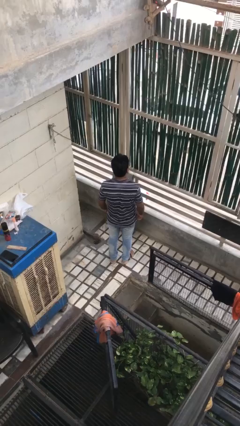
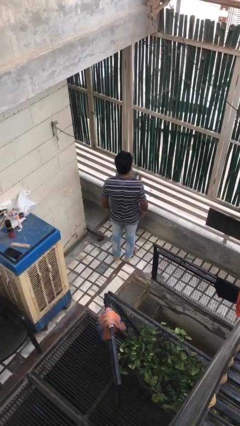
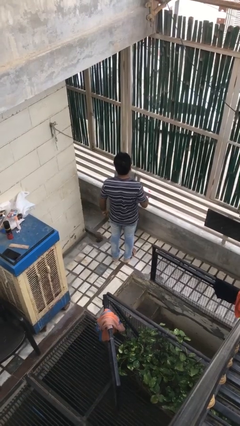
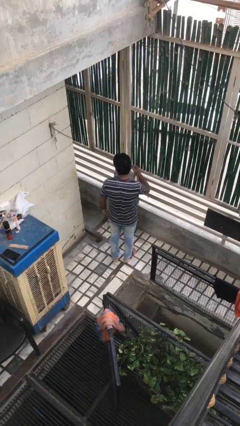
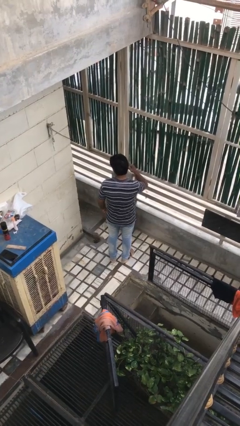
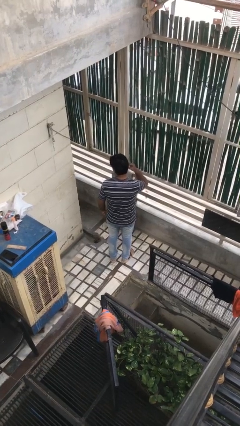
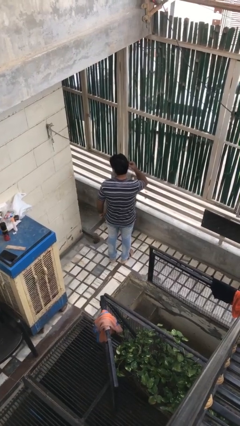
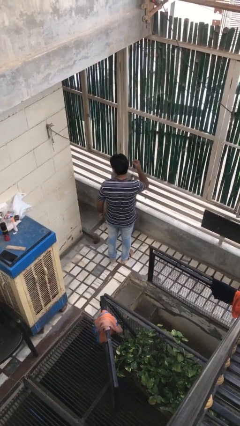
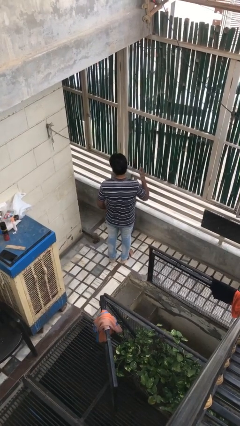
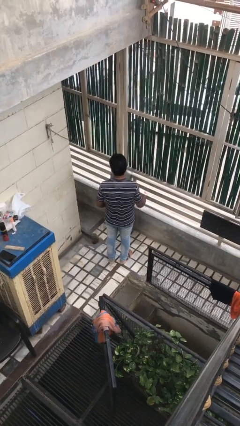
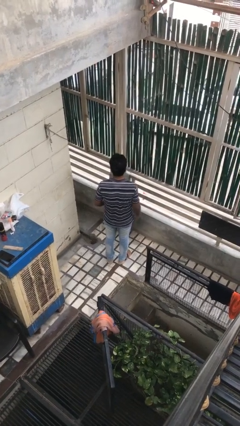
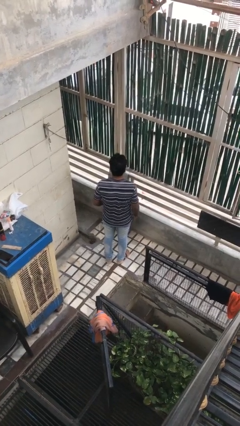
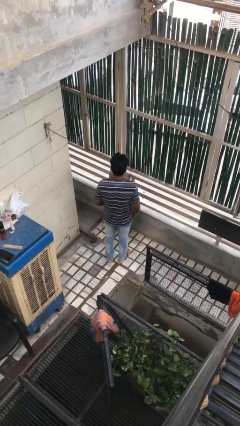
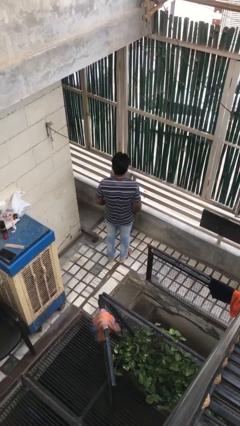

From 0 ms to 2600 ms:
person takes off earrings

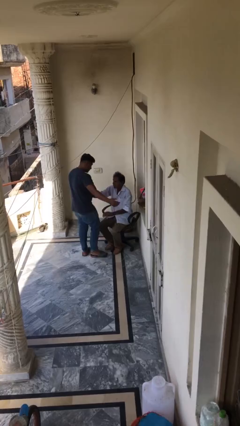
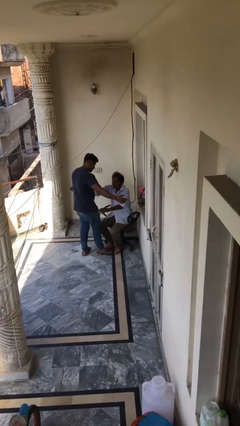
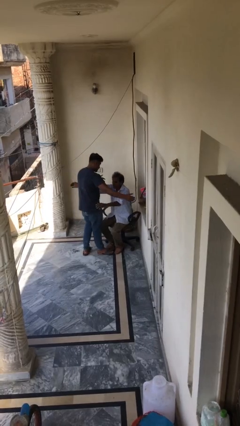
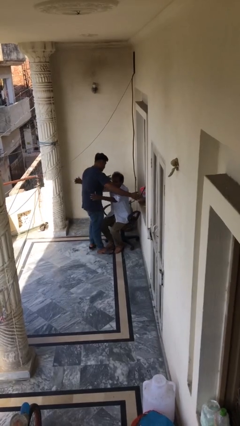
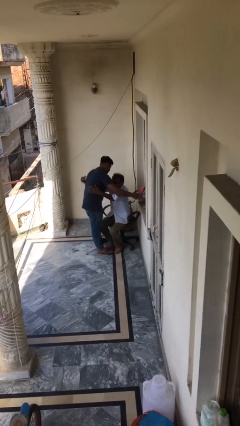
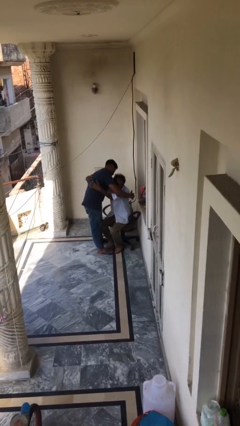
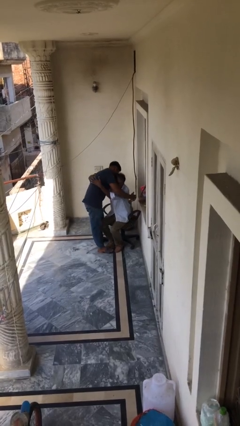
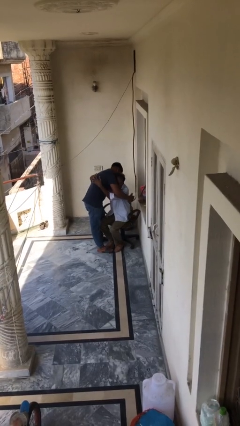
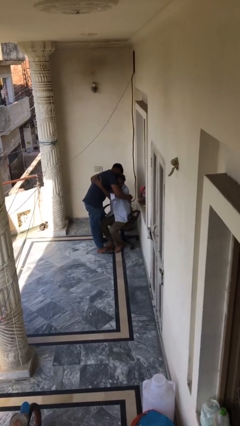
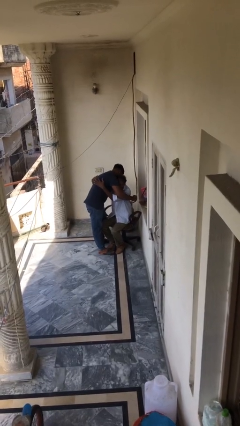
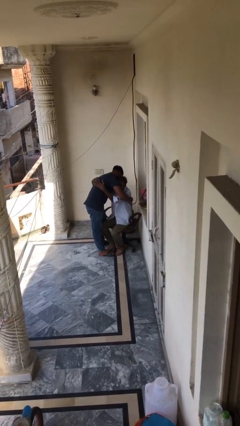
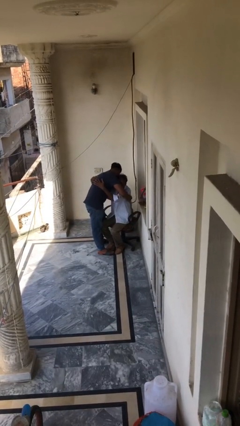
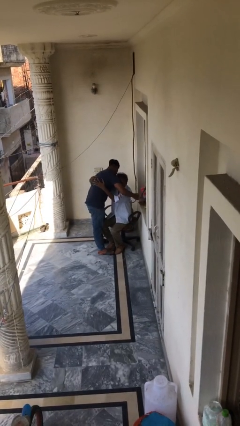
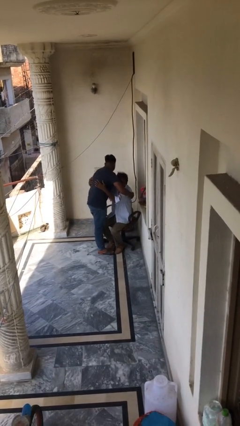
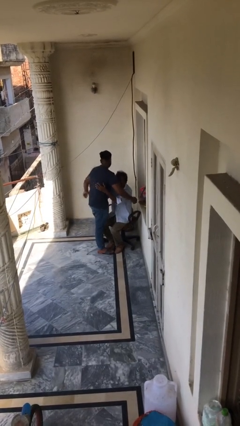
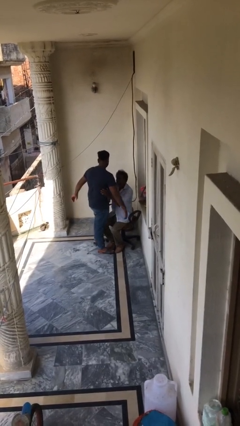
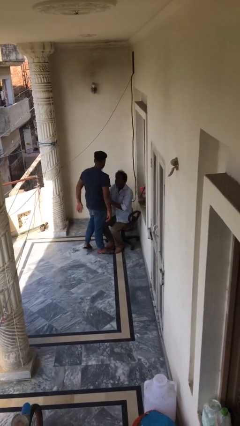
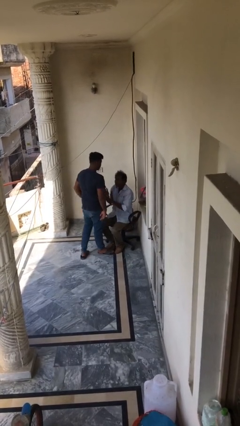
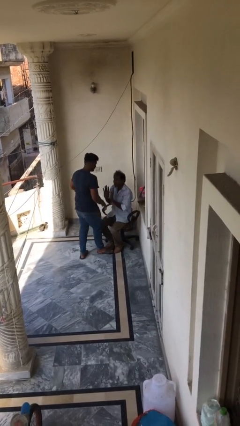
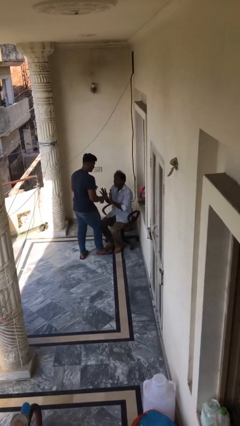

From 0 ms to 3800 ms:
person embraces person

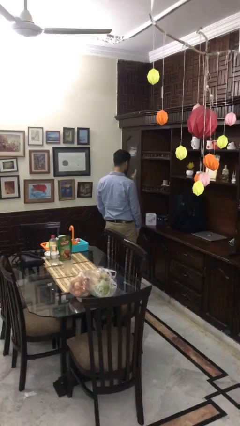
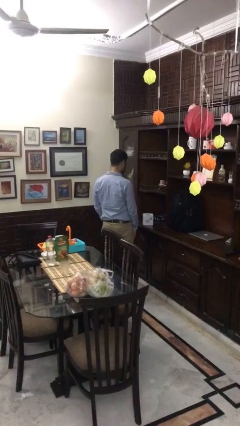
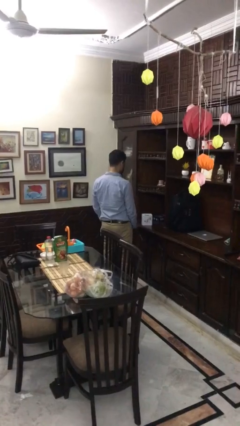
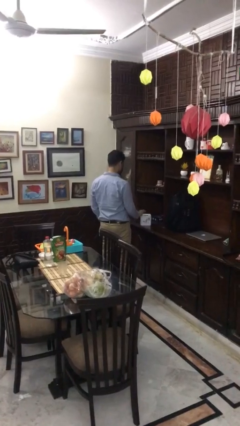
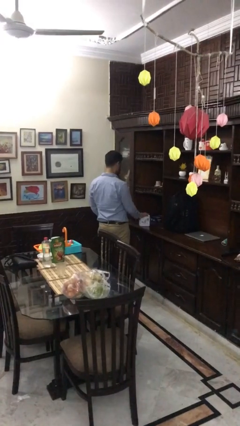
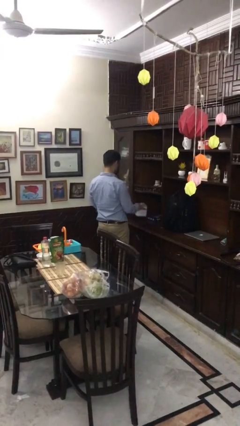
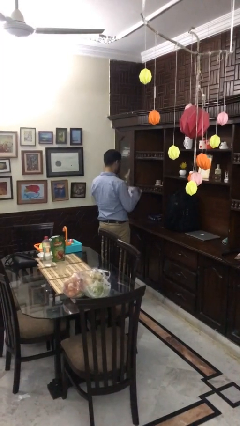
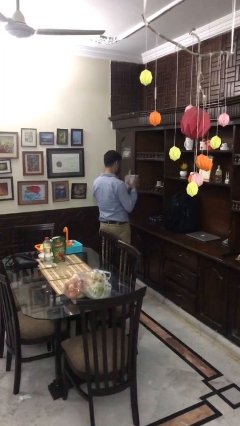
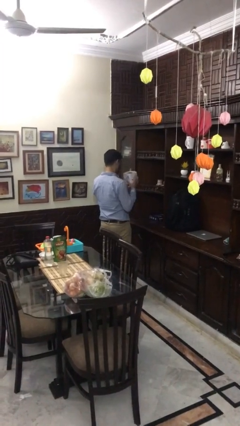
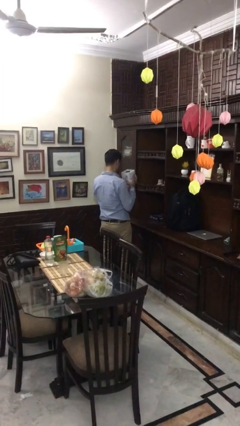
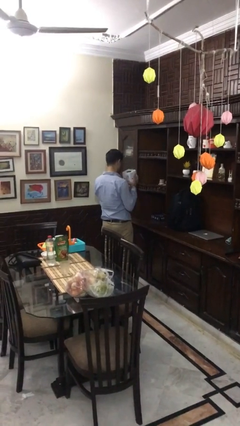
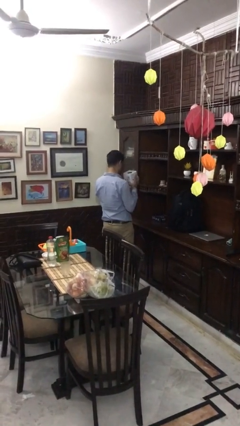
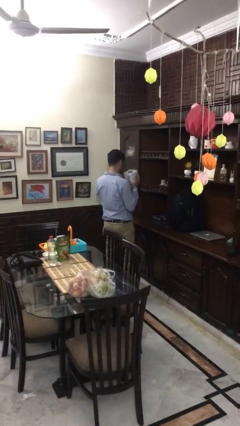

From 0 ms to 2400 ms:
person picks up object from countertop

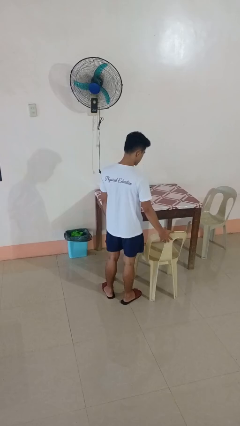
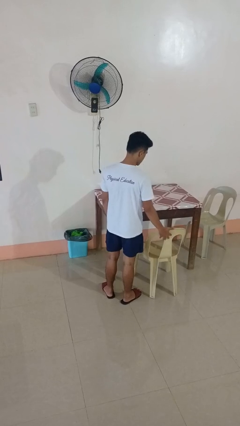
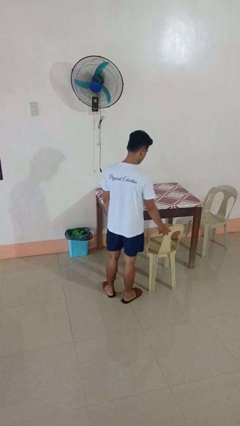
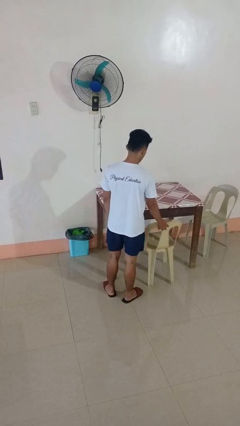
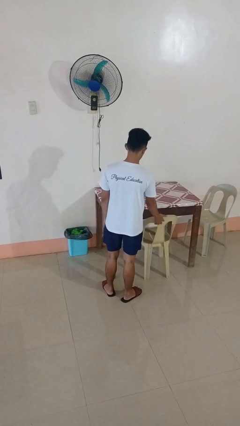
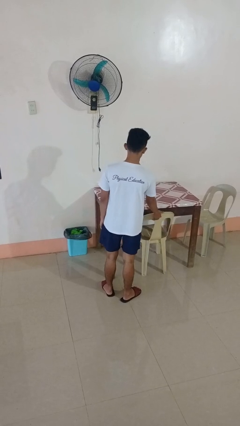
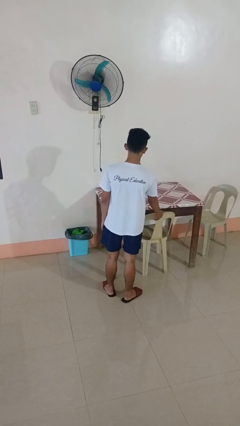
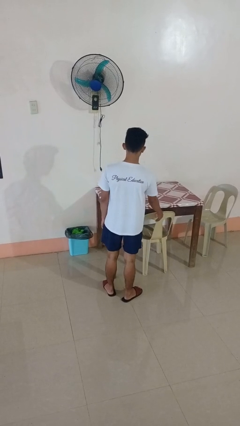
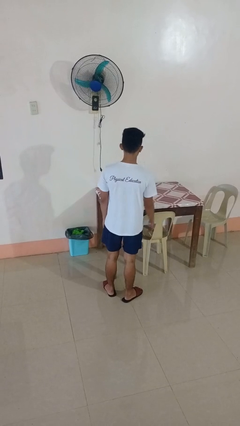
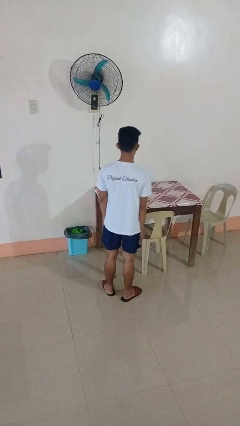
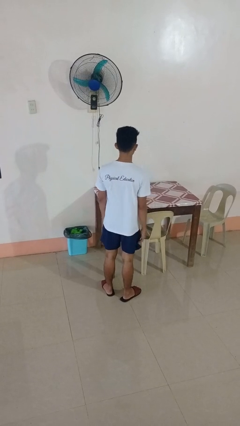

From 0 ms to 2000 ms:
person pushes in chair

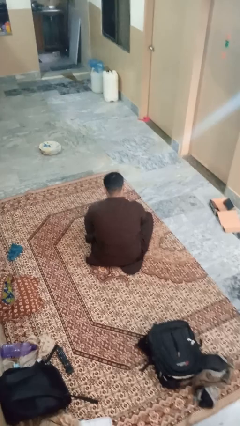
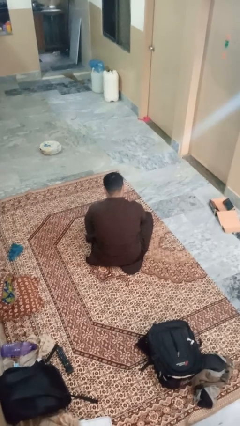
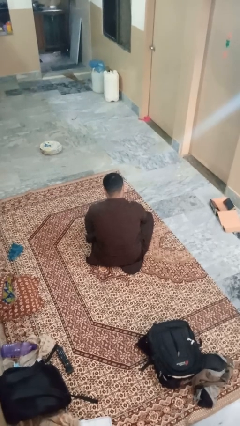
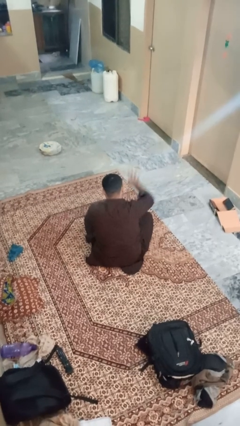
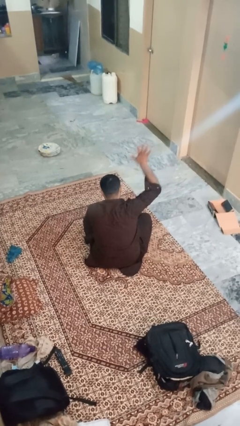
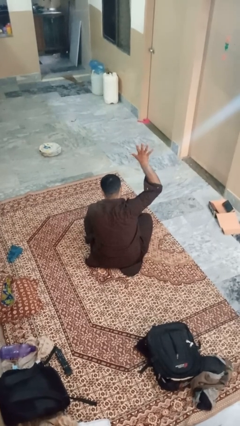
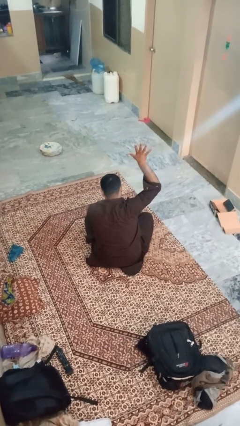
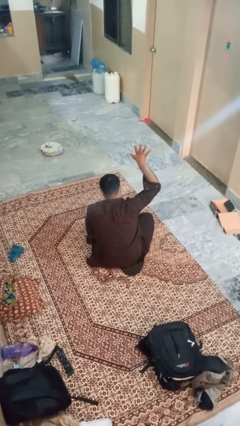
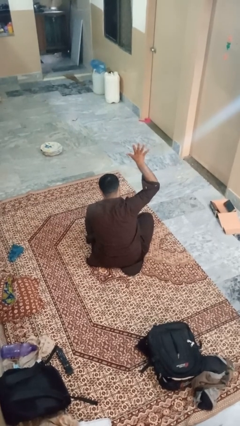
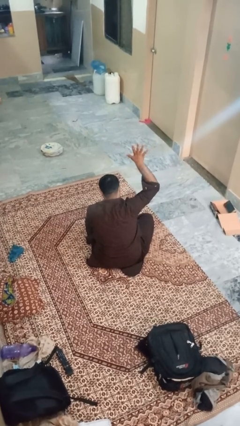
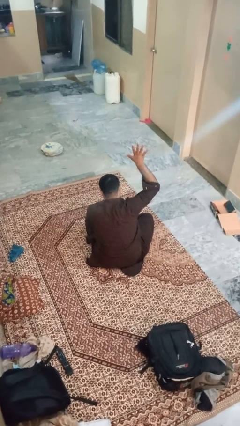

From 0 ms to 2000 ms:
person gestures number five

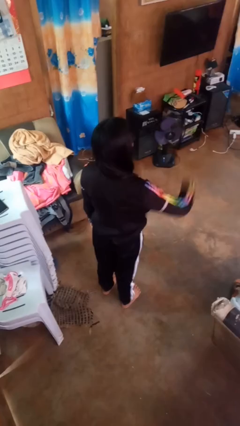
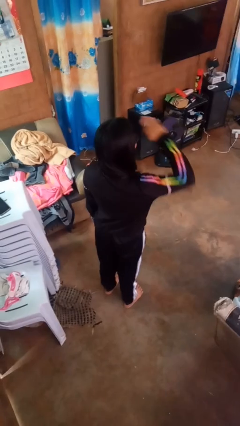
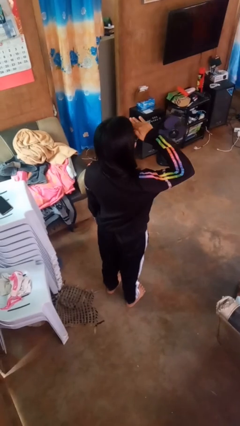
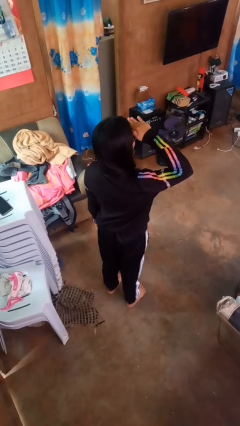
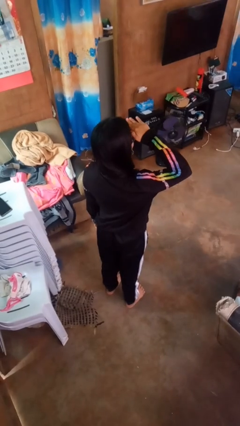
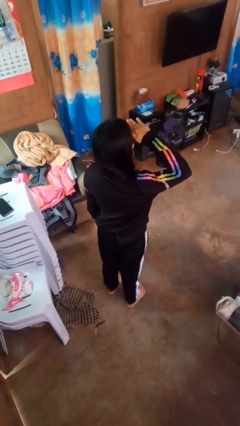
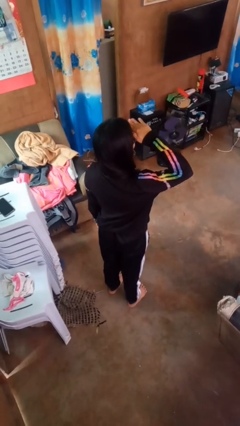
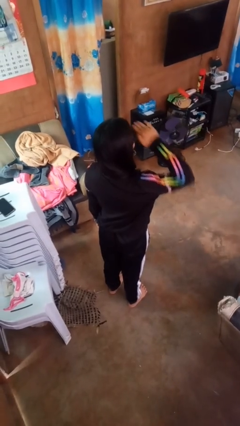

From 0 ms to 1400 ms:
person salutes

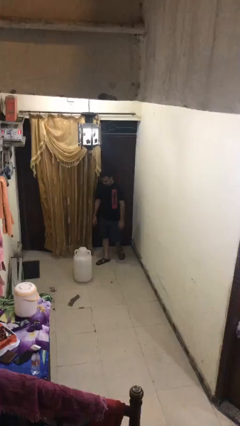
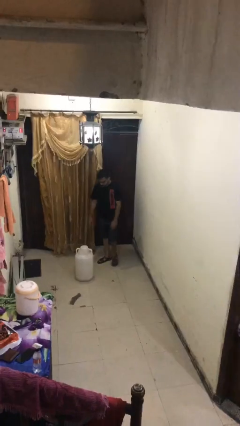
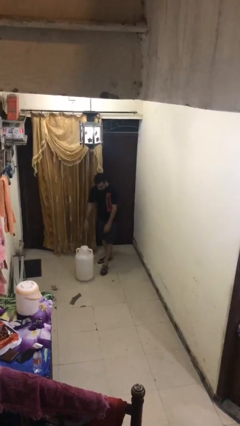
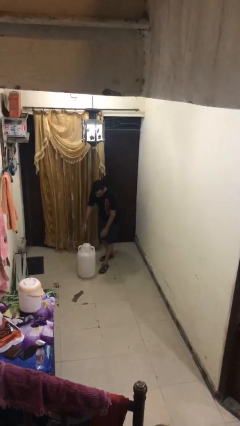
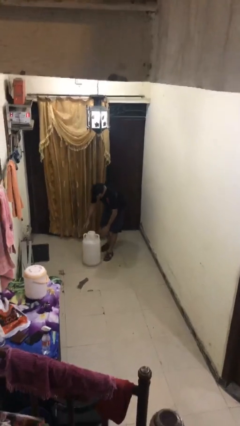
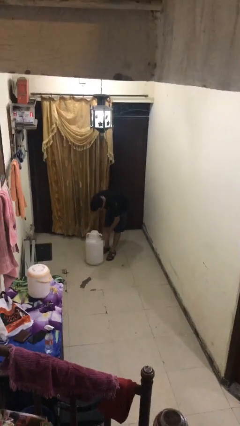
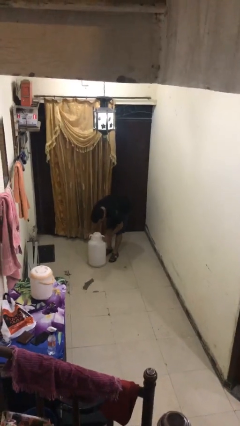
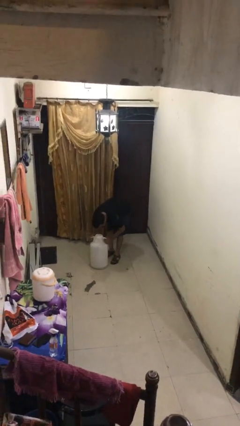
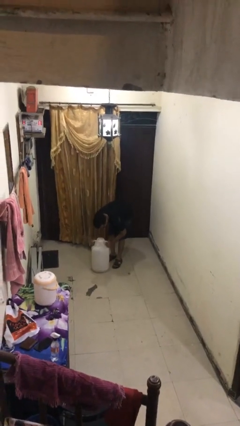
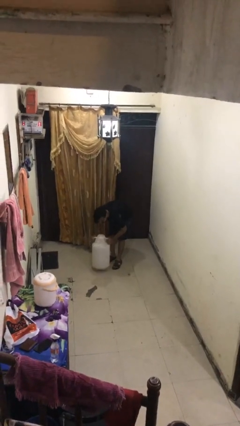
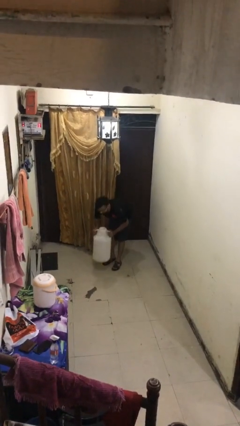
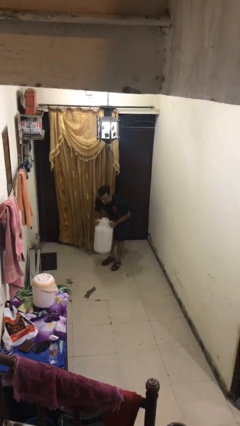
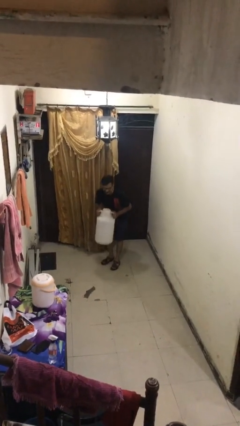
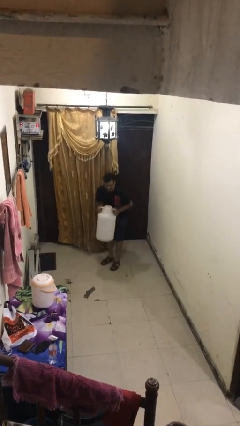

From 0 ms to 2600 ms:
person picks up object from floor

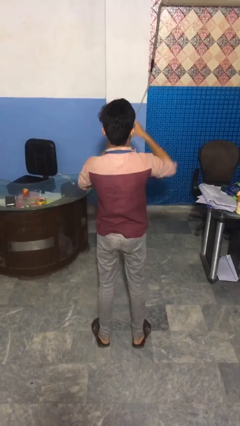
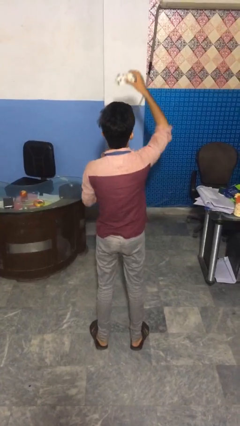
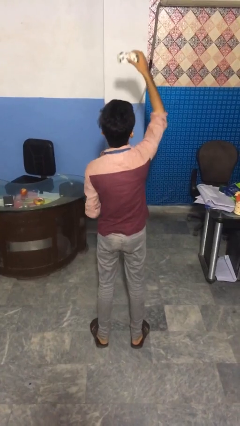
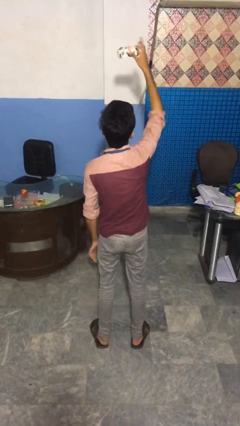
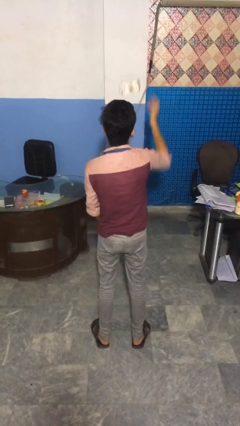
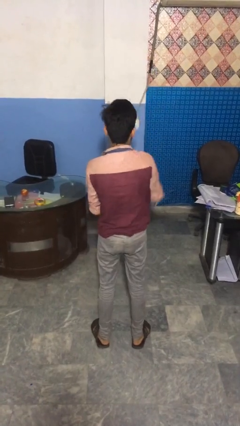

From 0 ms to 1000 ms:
person drops object
